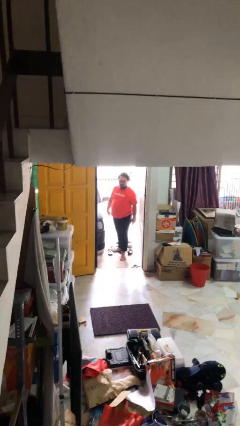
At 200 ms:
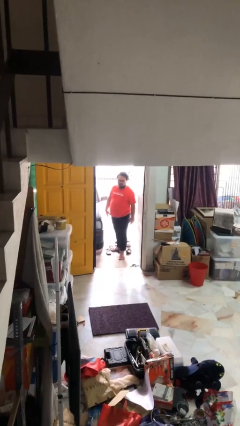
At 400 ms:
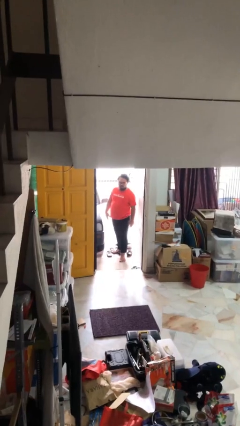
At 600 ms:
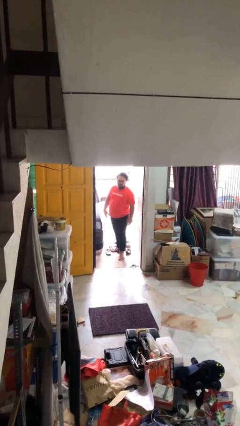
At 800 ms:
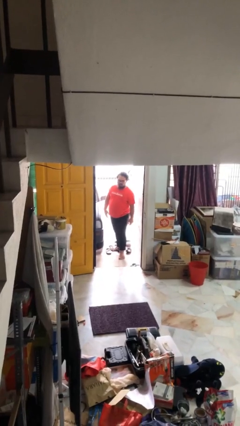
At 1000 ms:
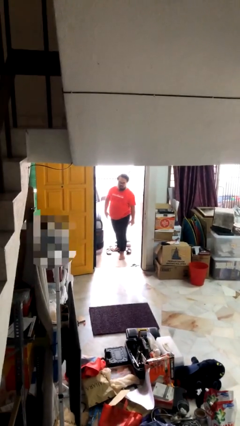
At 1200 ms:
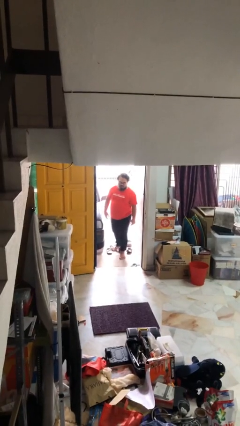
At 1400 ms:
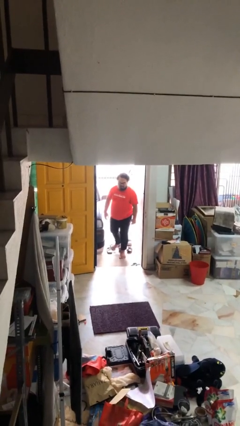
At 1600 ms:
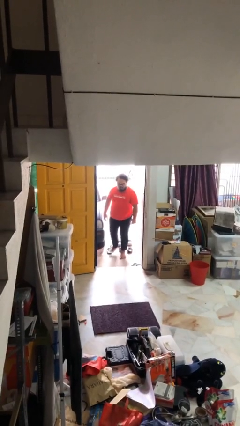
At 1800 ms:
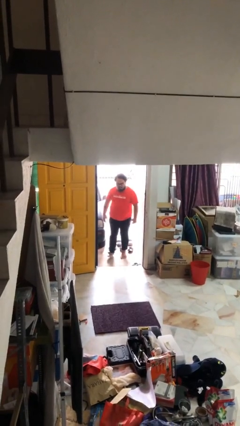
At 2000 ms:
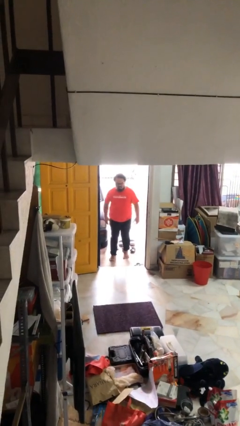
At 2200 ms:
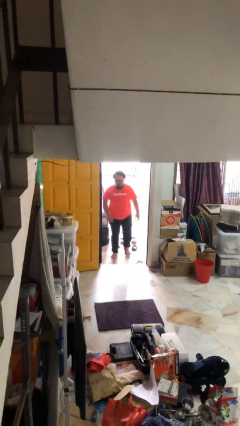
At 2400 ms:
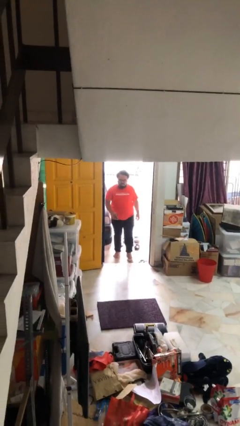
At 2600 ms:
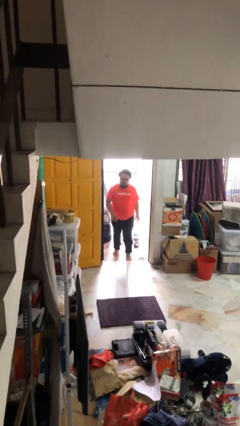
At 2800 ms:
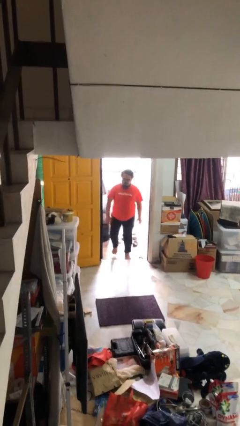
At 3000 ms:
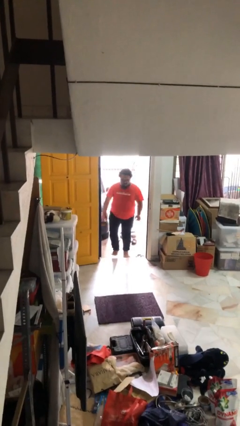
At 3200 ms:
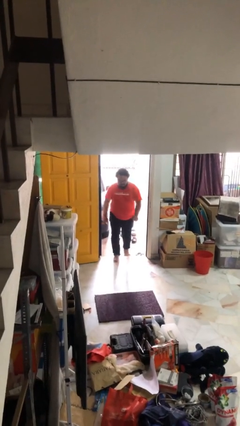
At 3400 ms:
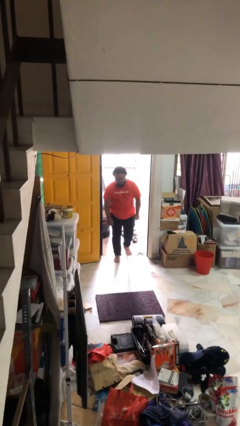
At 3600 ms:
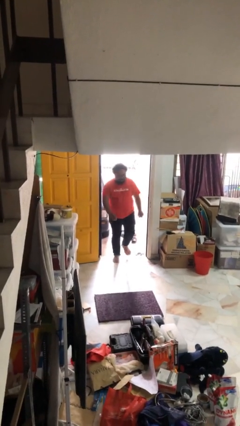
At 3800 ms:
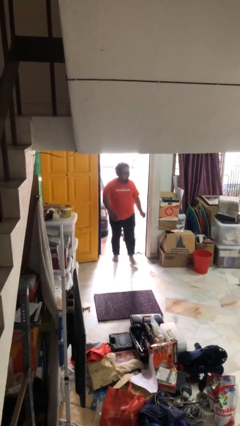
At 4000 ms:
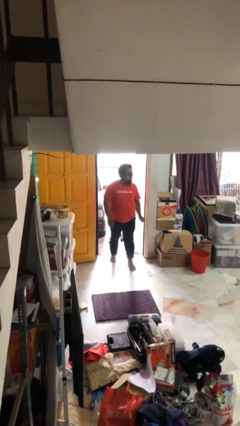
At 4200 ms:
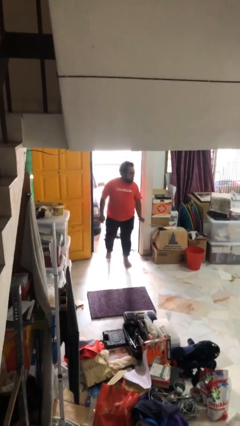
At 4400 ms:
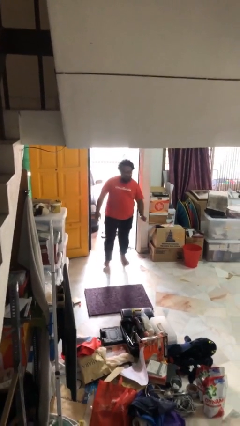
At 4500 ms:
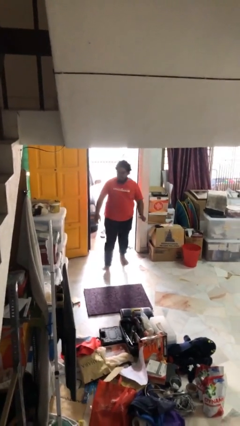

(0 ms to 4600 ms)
person enters scene through structure

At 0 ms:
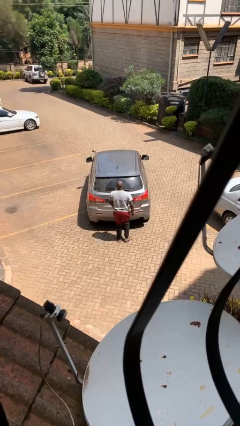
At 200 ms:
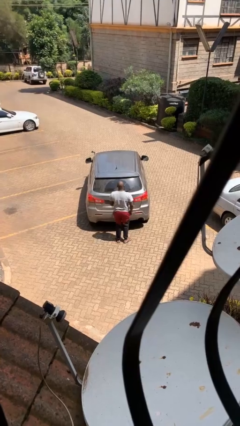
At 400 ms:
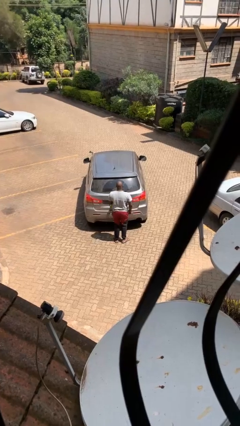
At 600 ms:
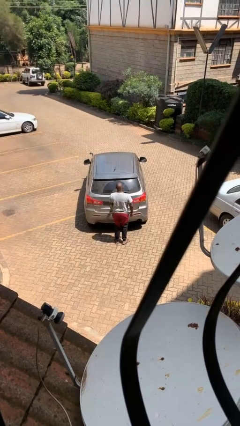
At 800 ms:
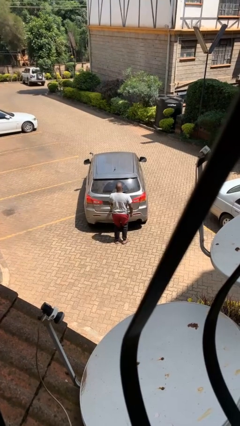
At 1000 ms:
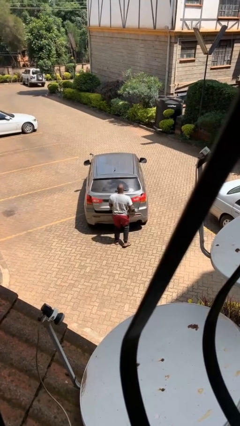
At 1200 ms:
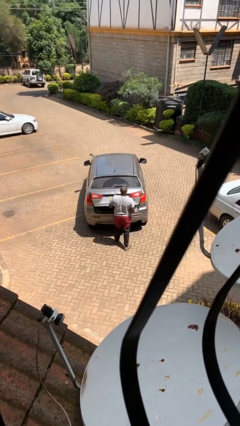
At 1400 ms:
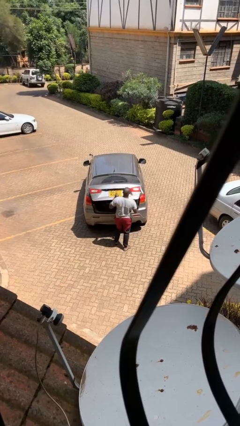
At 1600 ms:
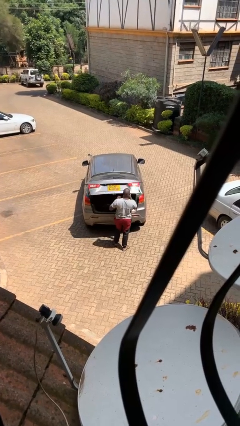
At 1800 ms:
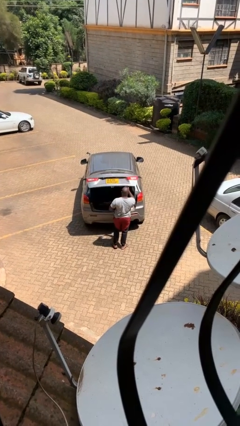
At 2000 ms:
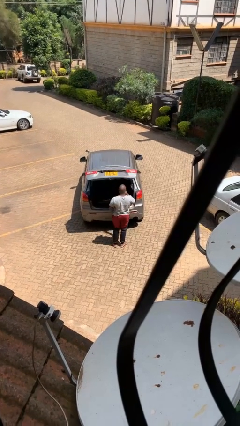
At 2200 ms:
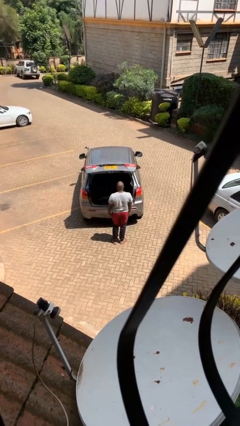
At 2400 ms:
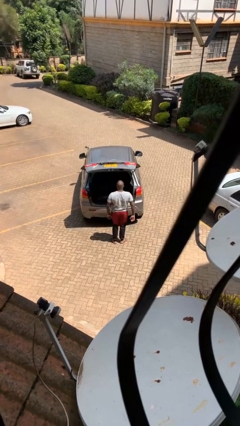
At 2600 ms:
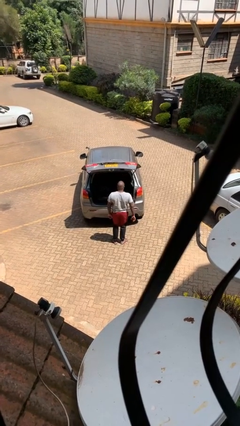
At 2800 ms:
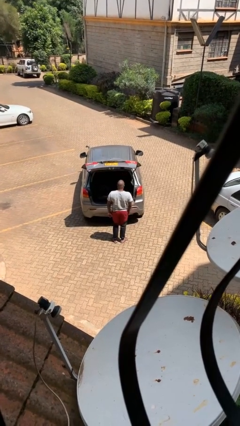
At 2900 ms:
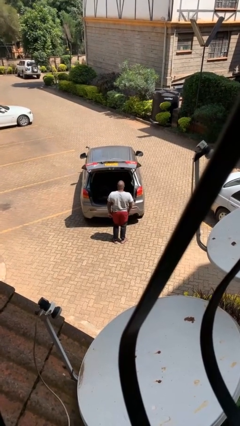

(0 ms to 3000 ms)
person opens car trunk

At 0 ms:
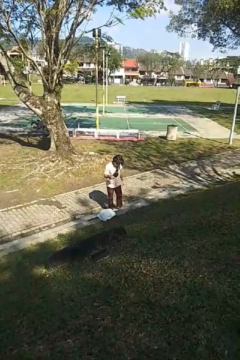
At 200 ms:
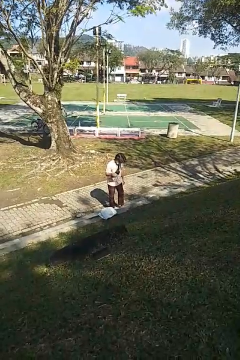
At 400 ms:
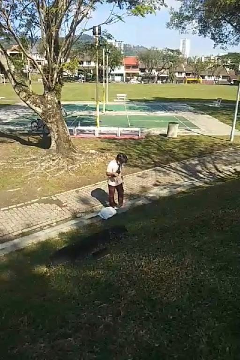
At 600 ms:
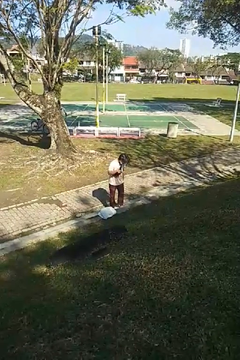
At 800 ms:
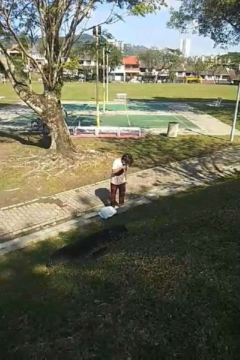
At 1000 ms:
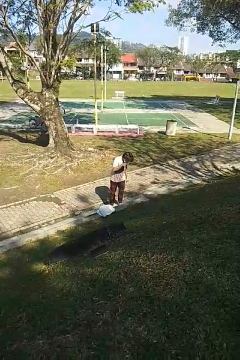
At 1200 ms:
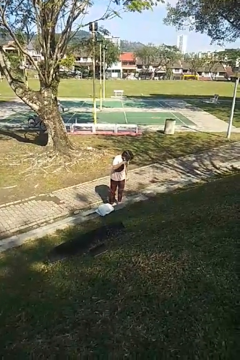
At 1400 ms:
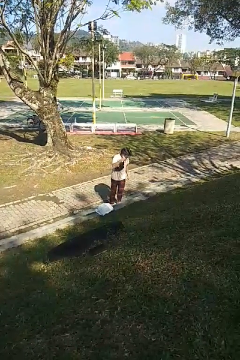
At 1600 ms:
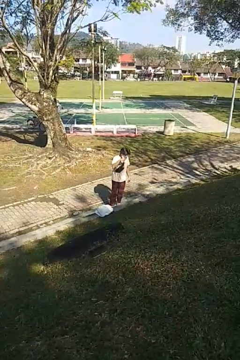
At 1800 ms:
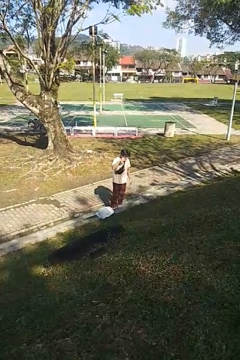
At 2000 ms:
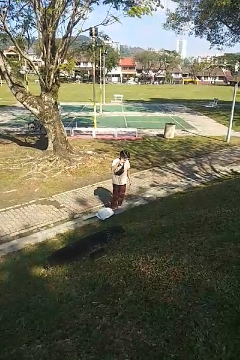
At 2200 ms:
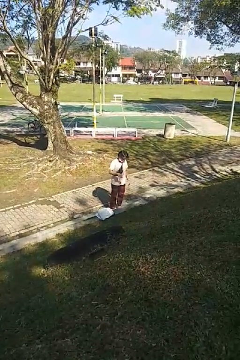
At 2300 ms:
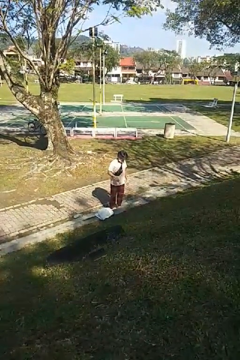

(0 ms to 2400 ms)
person brushes teeth

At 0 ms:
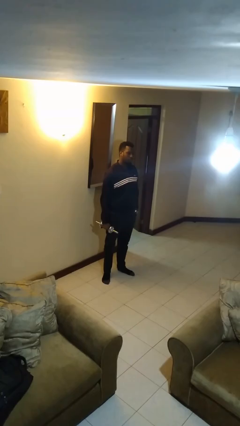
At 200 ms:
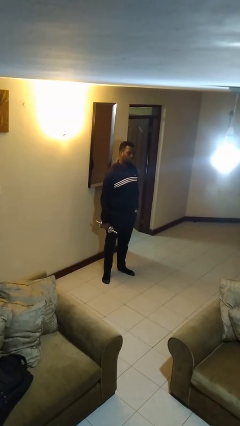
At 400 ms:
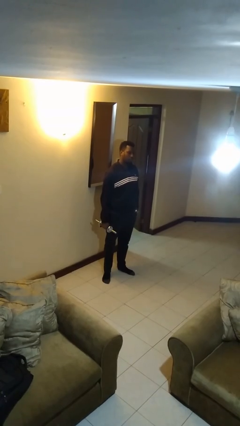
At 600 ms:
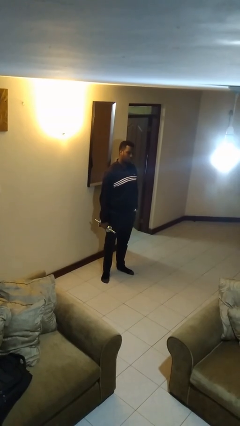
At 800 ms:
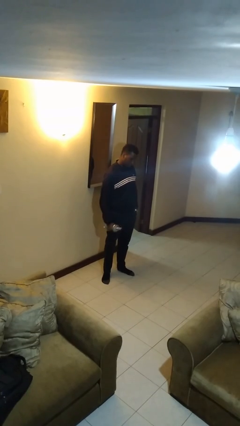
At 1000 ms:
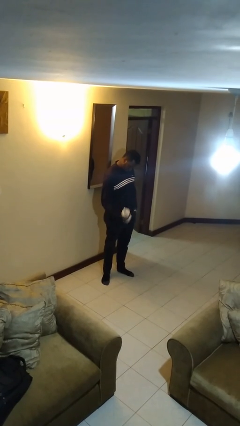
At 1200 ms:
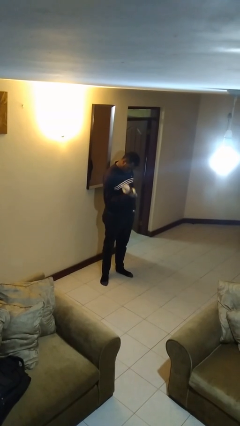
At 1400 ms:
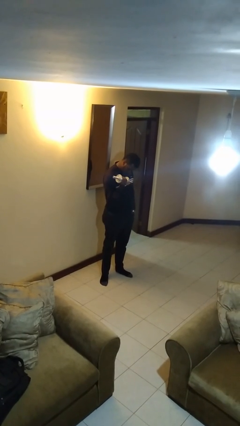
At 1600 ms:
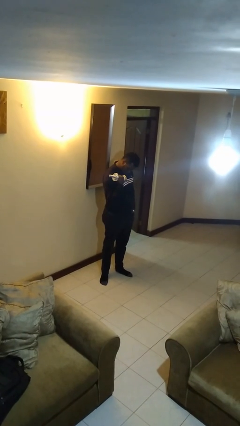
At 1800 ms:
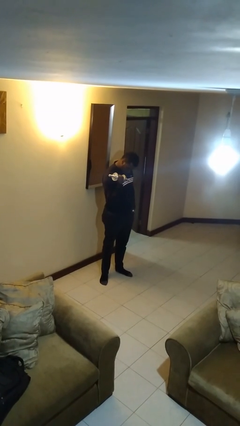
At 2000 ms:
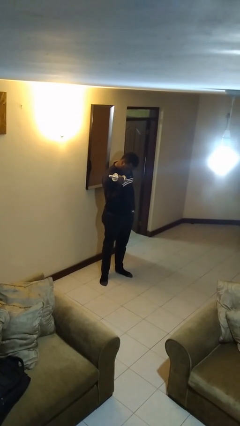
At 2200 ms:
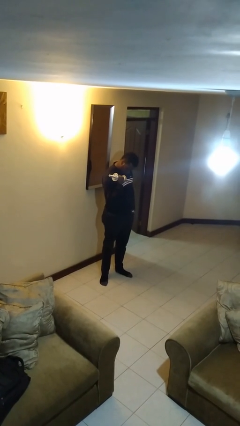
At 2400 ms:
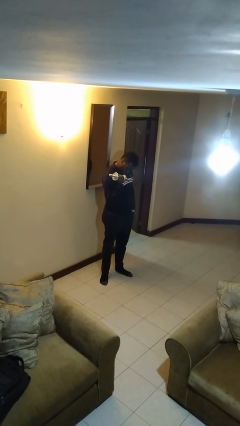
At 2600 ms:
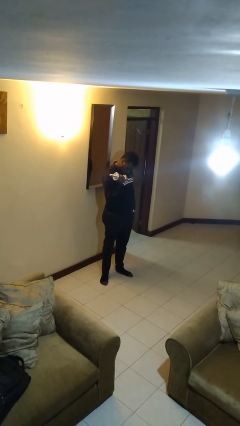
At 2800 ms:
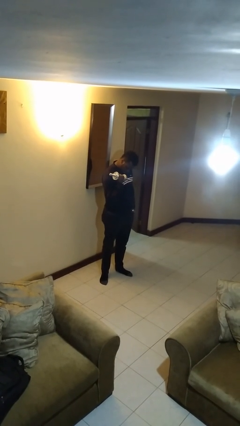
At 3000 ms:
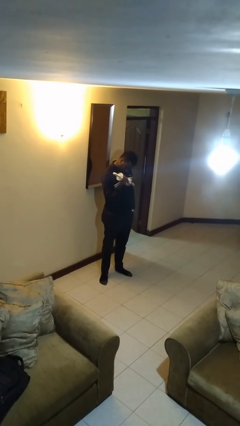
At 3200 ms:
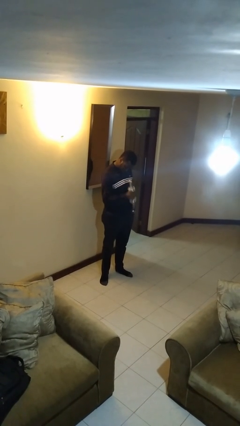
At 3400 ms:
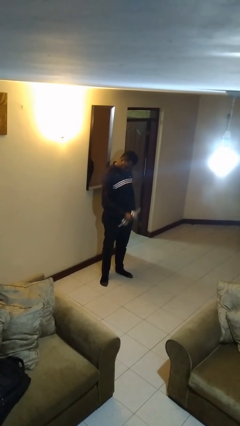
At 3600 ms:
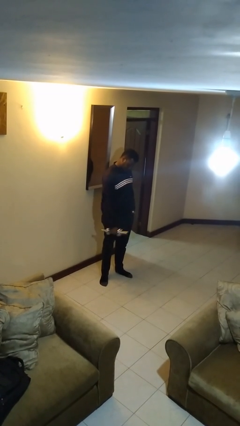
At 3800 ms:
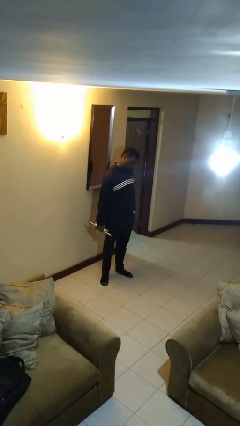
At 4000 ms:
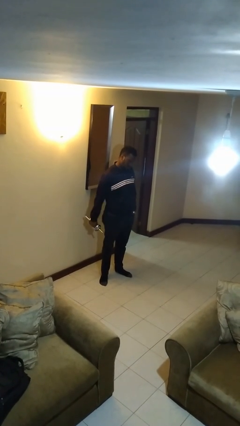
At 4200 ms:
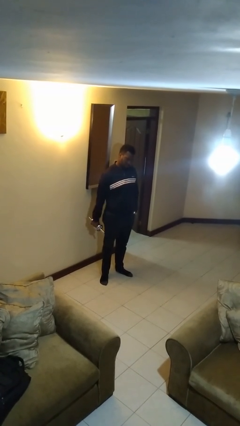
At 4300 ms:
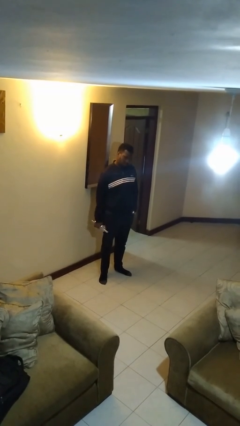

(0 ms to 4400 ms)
person lifts dumbbells

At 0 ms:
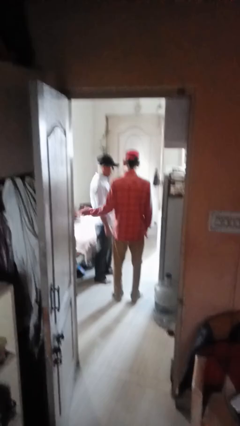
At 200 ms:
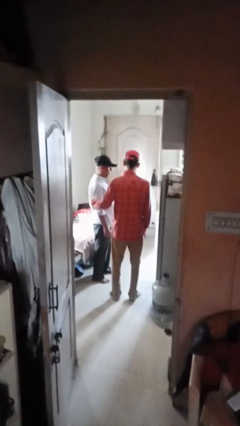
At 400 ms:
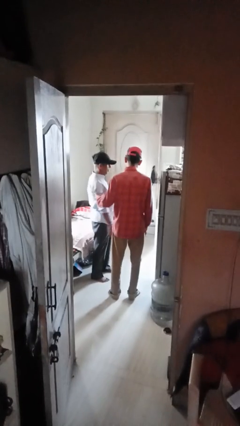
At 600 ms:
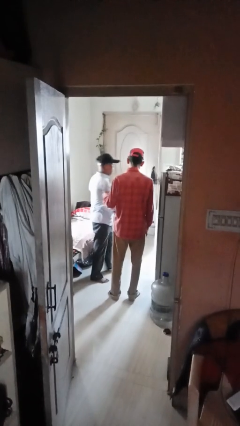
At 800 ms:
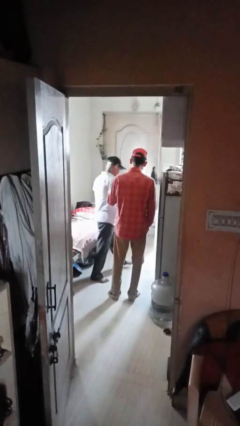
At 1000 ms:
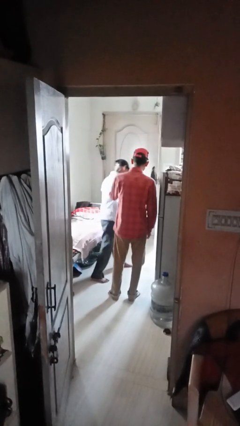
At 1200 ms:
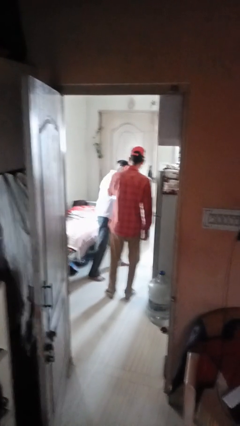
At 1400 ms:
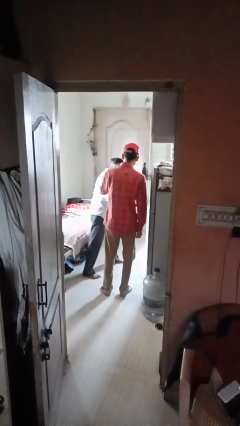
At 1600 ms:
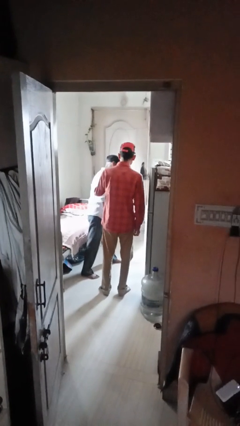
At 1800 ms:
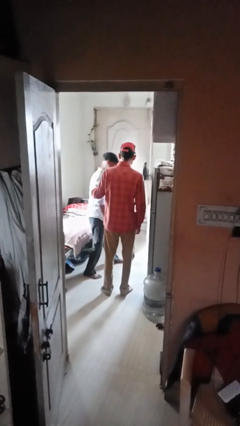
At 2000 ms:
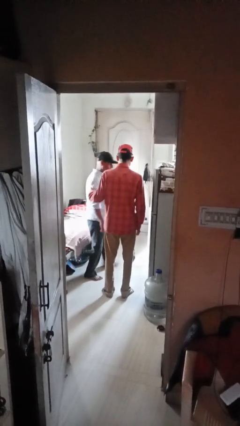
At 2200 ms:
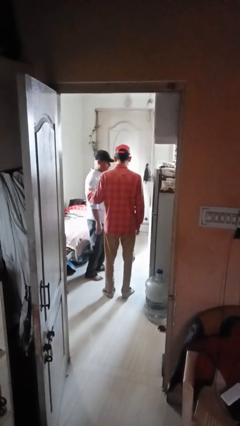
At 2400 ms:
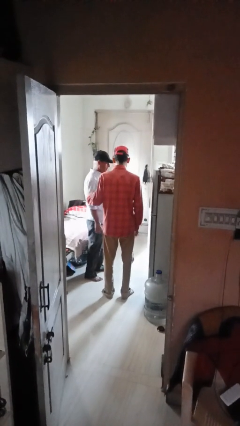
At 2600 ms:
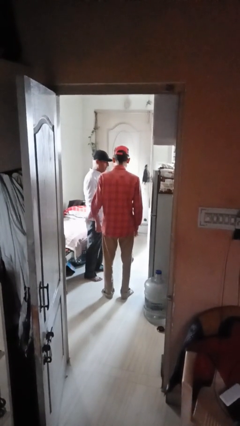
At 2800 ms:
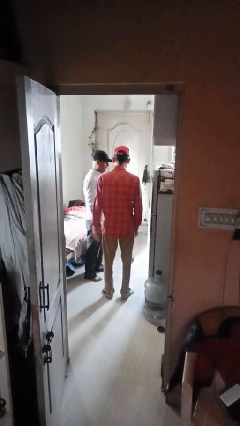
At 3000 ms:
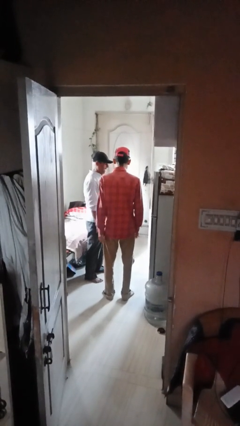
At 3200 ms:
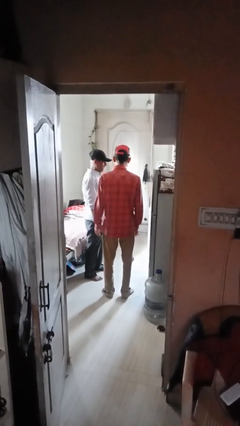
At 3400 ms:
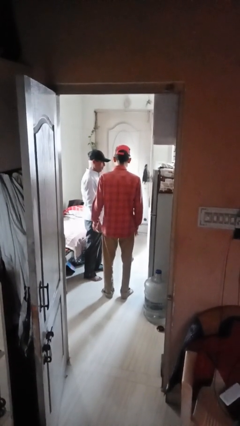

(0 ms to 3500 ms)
person shoves person

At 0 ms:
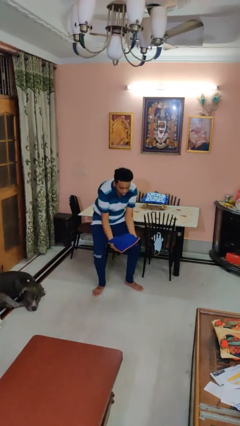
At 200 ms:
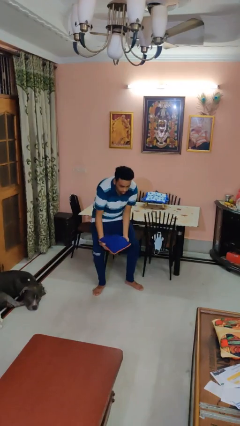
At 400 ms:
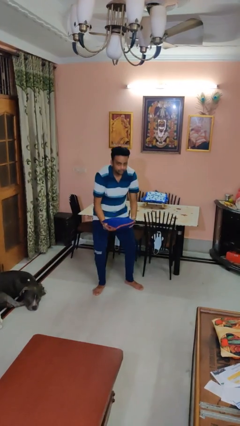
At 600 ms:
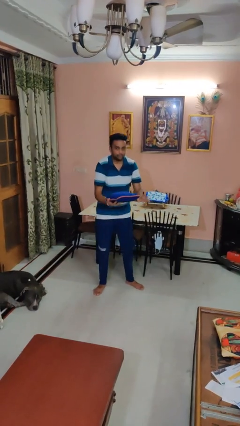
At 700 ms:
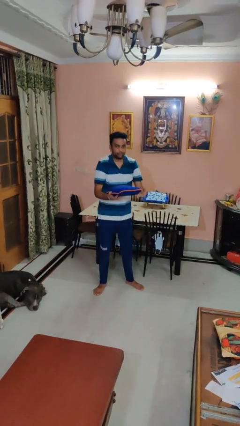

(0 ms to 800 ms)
person catches dropped object
